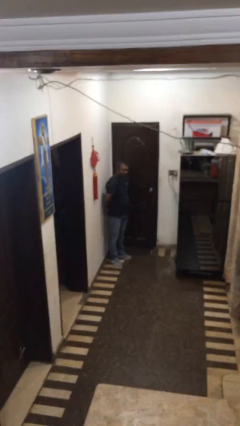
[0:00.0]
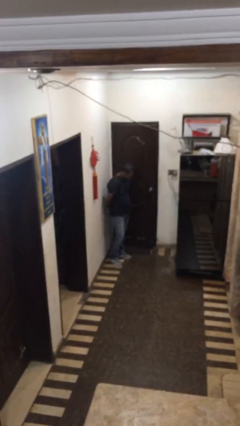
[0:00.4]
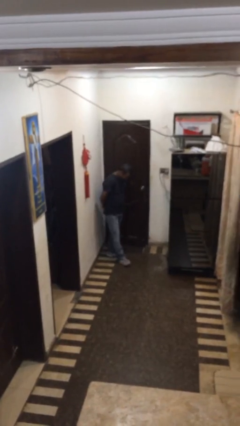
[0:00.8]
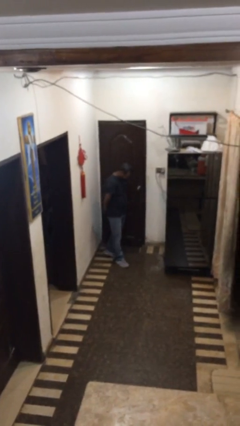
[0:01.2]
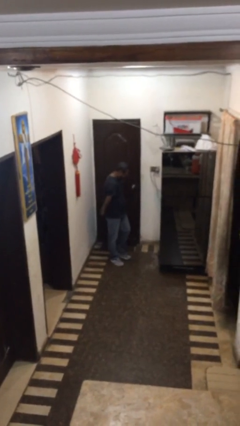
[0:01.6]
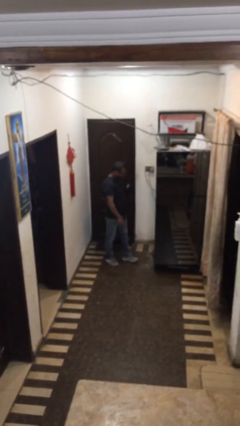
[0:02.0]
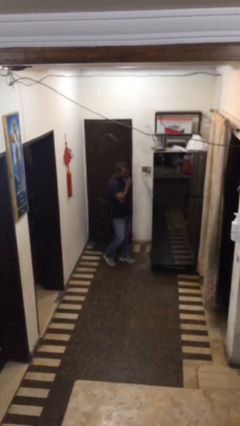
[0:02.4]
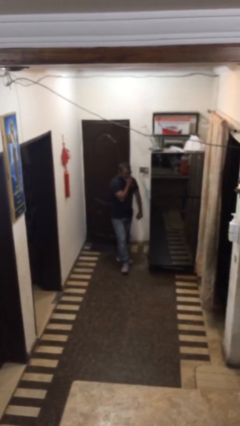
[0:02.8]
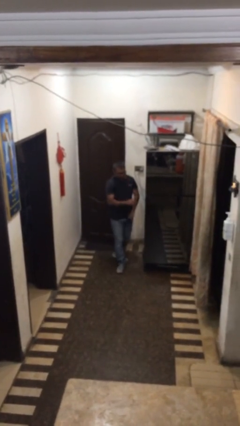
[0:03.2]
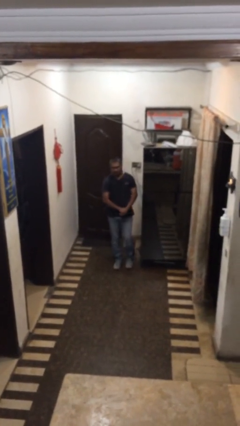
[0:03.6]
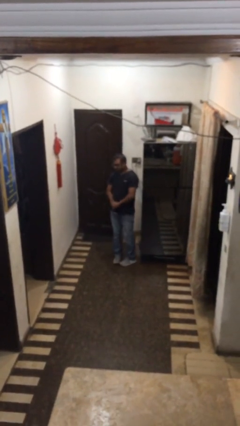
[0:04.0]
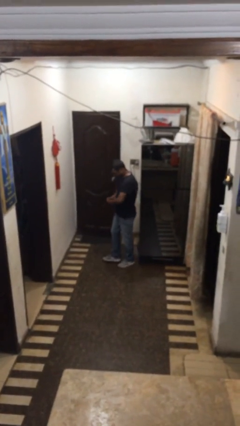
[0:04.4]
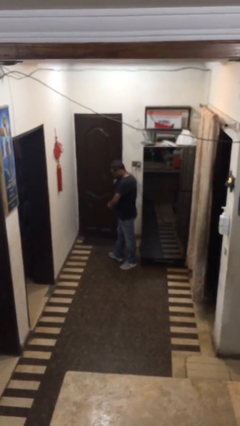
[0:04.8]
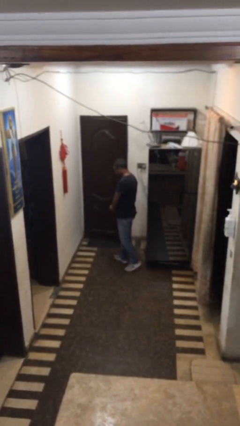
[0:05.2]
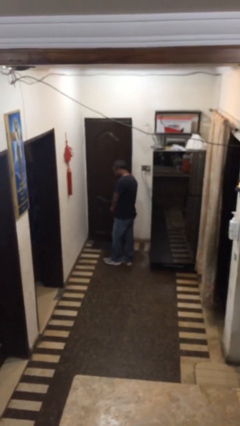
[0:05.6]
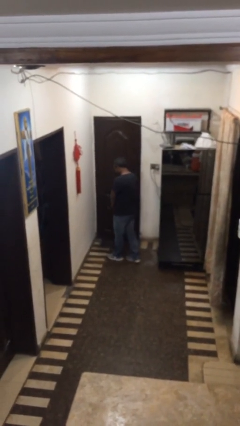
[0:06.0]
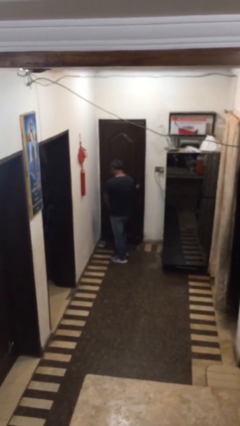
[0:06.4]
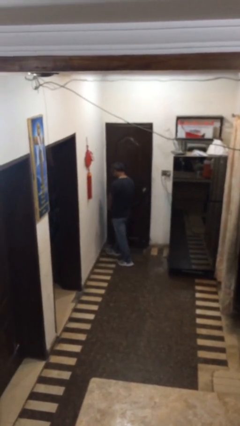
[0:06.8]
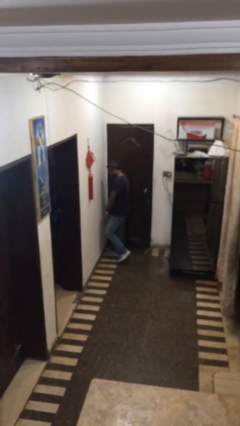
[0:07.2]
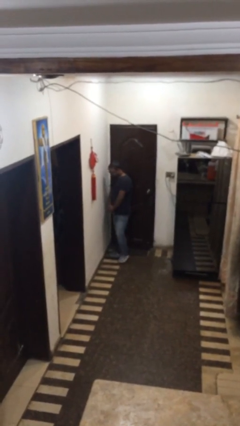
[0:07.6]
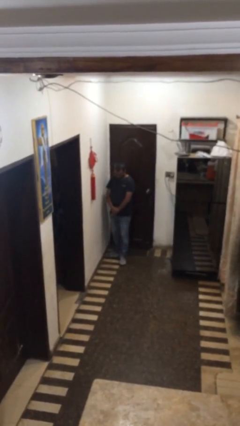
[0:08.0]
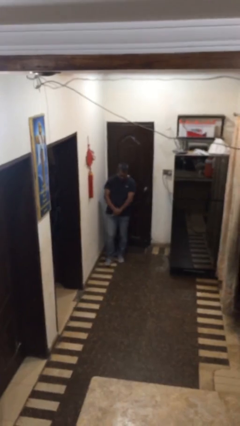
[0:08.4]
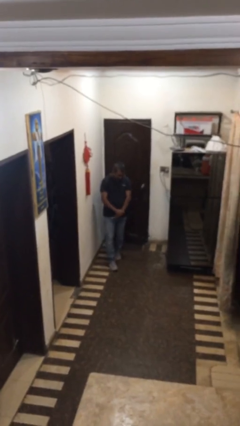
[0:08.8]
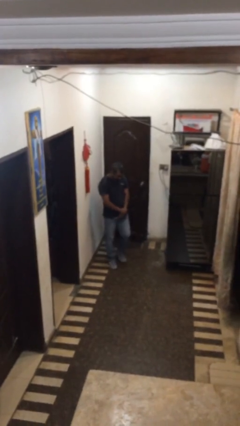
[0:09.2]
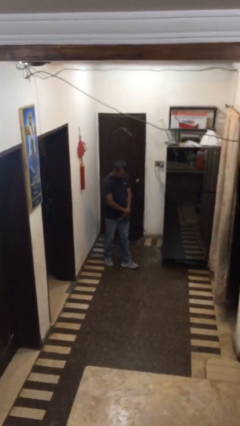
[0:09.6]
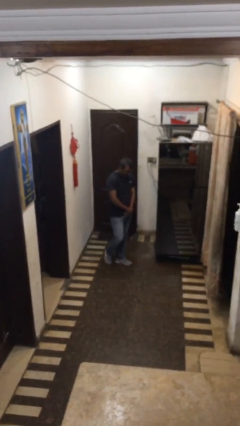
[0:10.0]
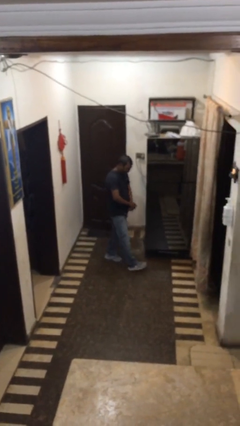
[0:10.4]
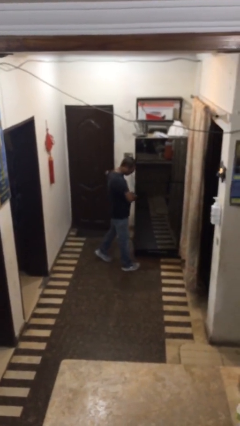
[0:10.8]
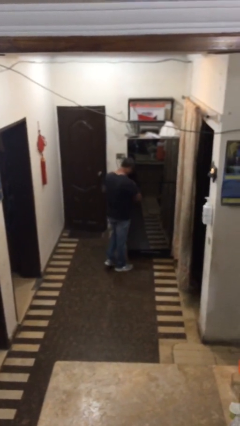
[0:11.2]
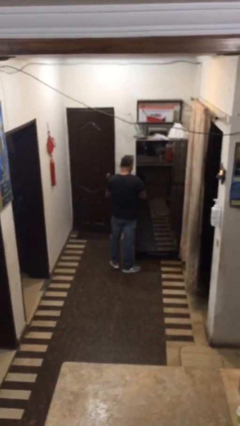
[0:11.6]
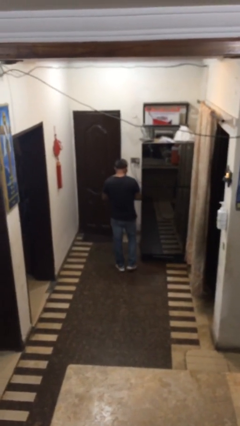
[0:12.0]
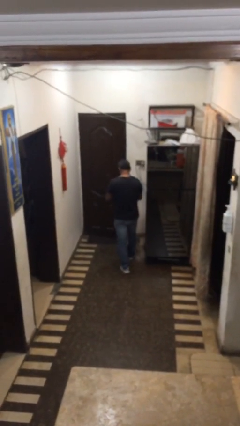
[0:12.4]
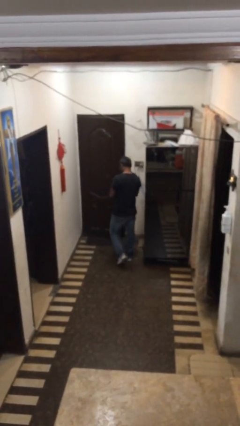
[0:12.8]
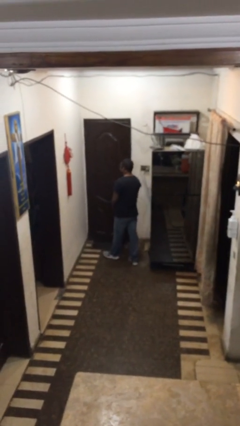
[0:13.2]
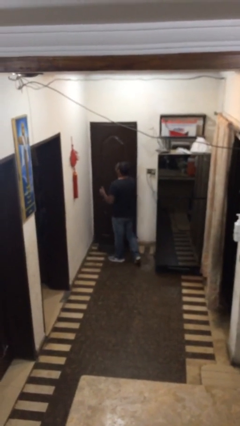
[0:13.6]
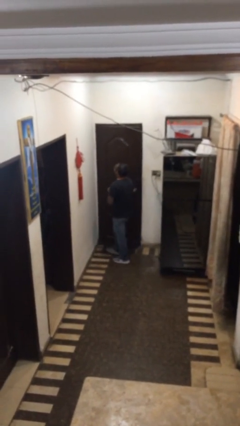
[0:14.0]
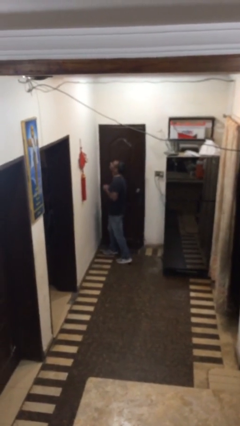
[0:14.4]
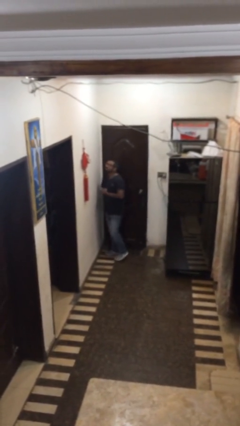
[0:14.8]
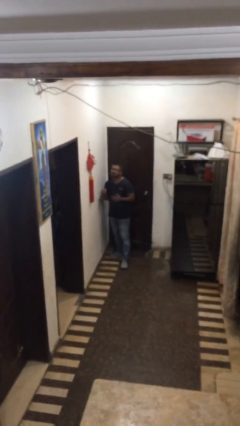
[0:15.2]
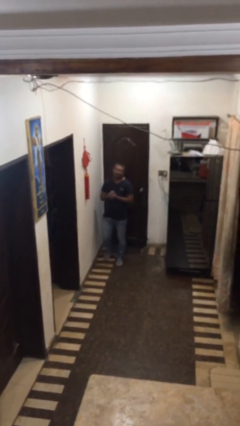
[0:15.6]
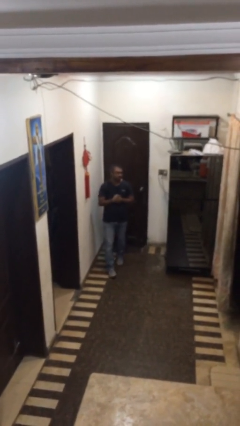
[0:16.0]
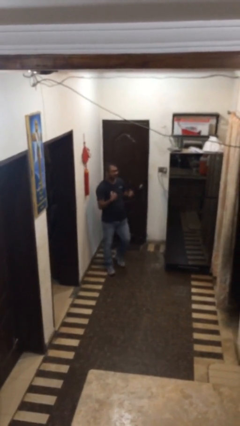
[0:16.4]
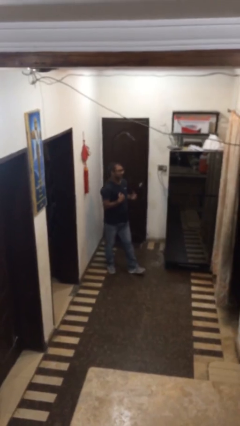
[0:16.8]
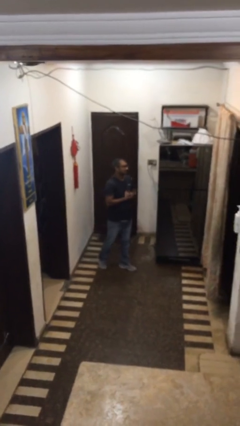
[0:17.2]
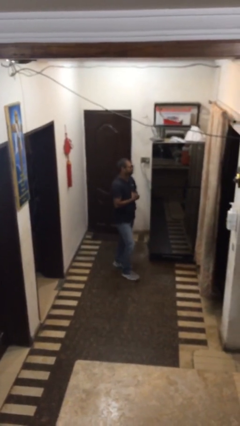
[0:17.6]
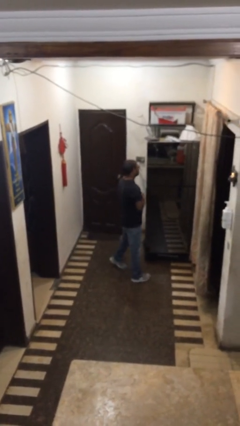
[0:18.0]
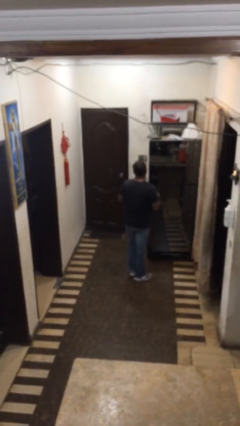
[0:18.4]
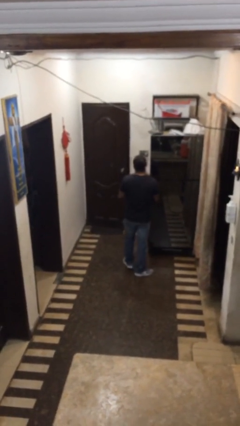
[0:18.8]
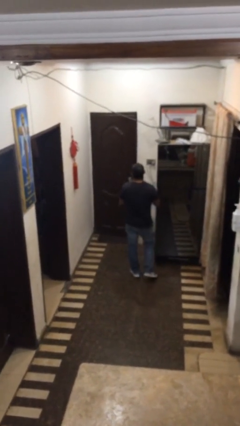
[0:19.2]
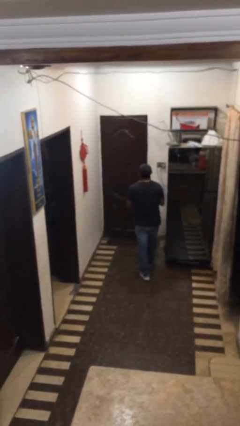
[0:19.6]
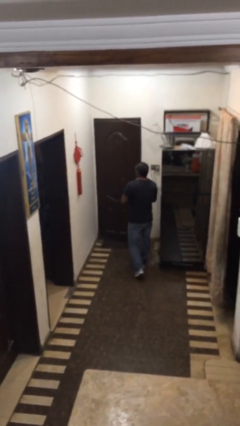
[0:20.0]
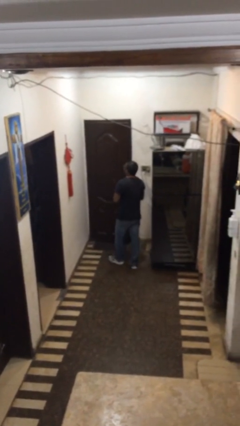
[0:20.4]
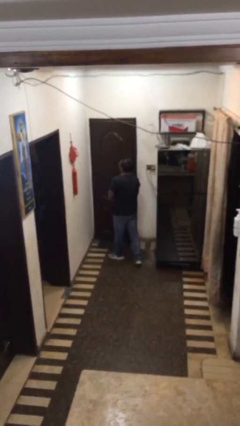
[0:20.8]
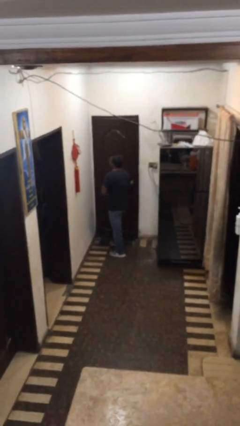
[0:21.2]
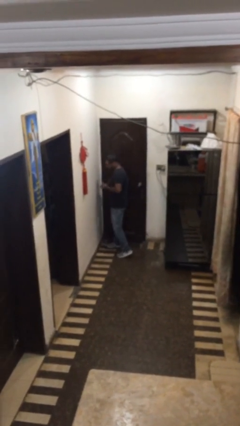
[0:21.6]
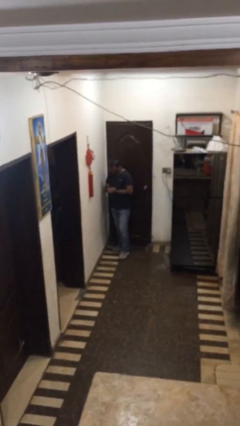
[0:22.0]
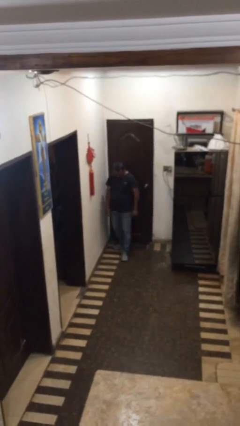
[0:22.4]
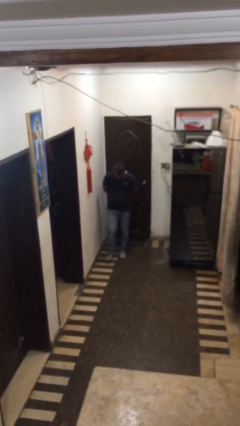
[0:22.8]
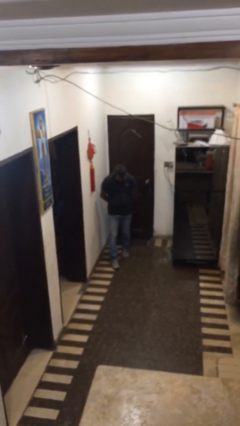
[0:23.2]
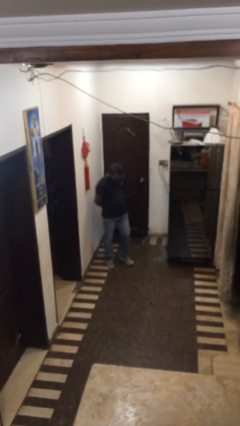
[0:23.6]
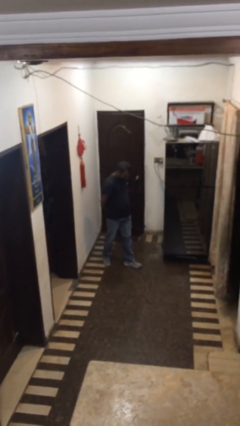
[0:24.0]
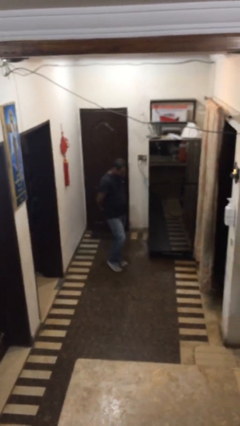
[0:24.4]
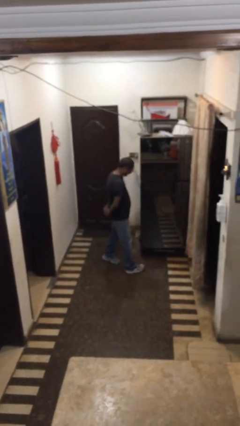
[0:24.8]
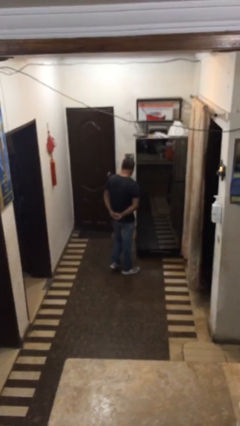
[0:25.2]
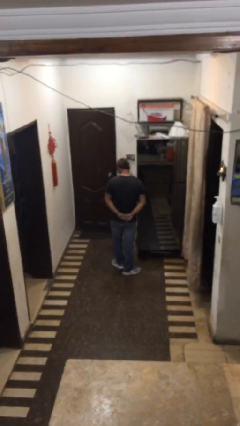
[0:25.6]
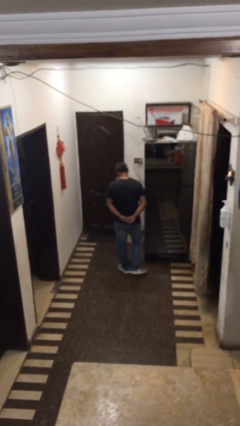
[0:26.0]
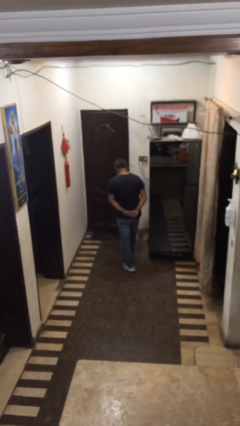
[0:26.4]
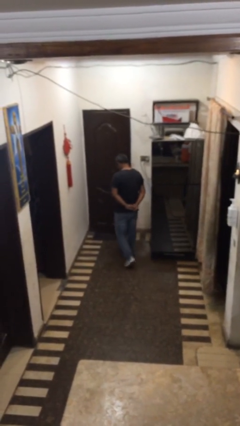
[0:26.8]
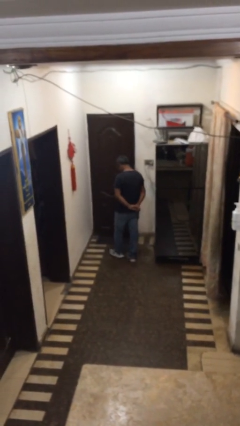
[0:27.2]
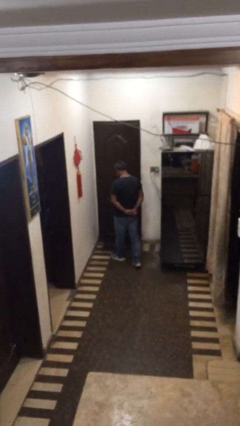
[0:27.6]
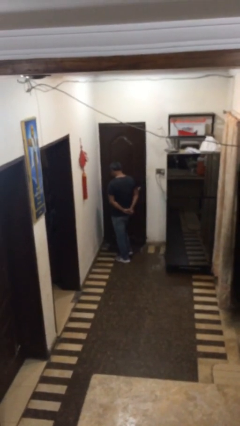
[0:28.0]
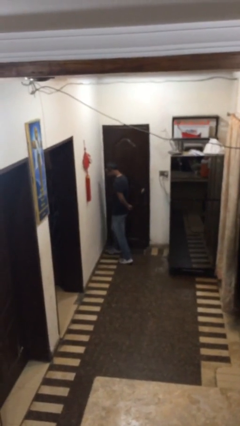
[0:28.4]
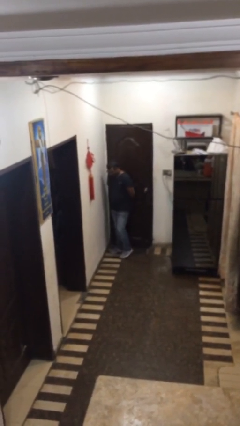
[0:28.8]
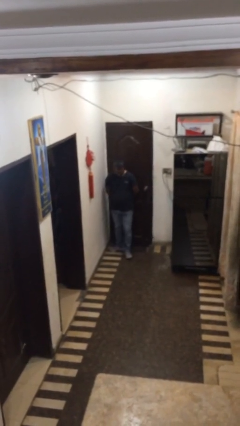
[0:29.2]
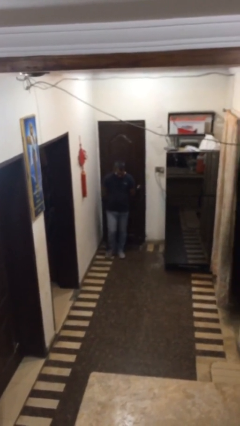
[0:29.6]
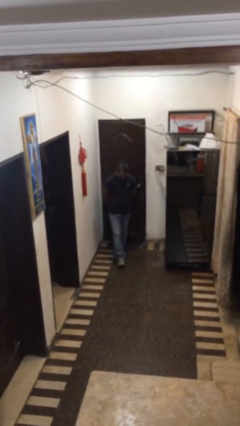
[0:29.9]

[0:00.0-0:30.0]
person walks

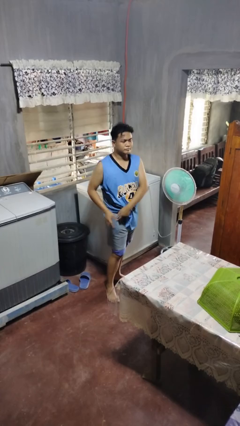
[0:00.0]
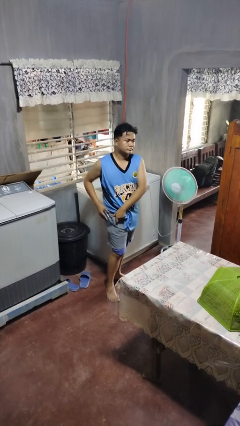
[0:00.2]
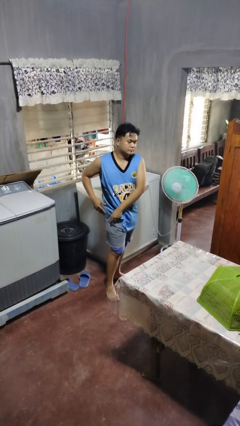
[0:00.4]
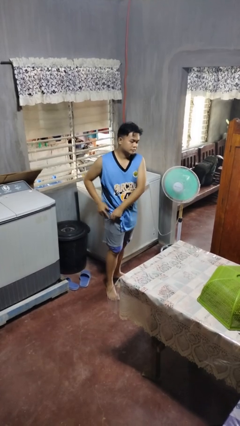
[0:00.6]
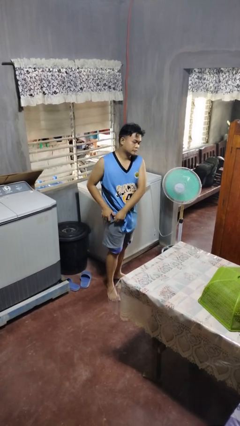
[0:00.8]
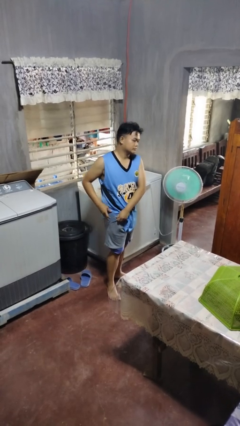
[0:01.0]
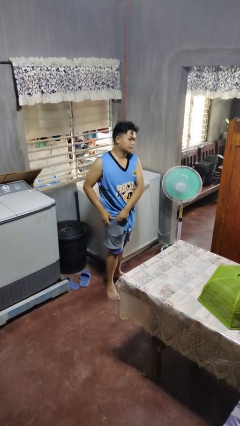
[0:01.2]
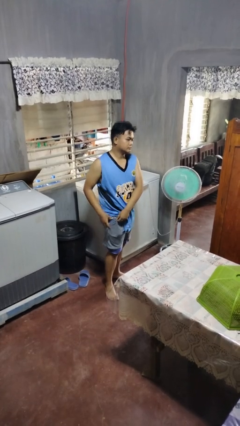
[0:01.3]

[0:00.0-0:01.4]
person puts phone into pocket

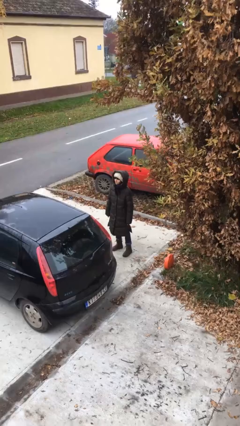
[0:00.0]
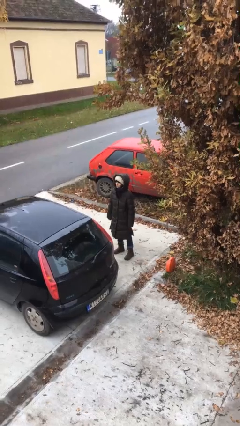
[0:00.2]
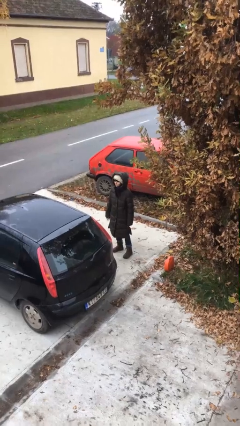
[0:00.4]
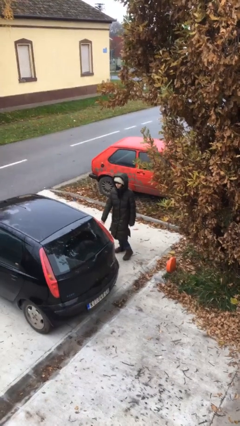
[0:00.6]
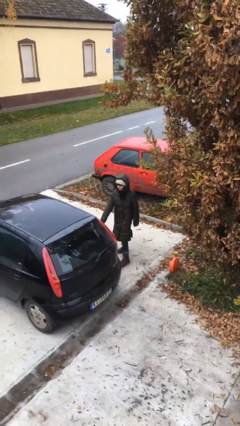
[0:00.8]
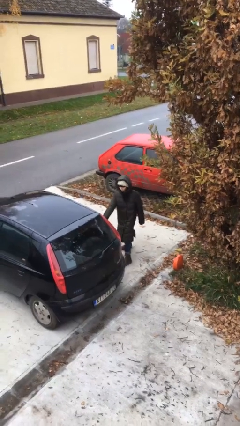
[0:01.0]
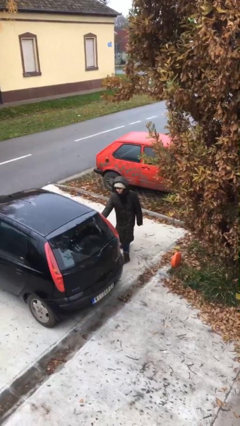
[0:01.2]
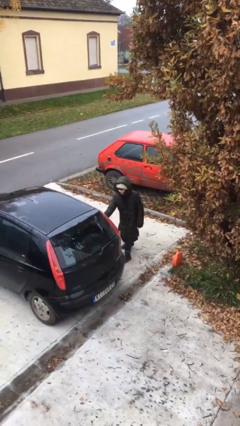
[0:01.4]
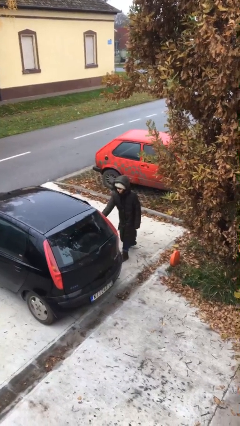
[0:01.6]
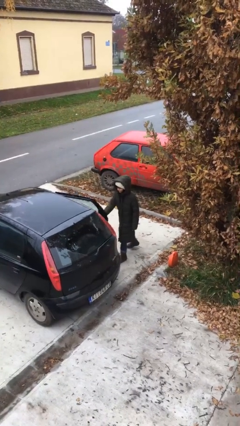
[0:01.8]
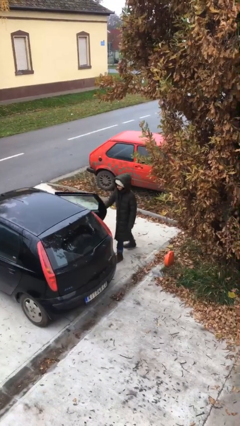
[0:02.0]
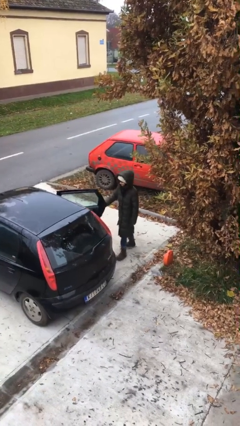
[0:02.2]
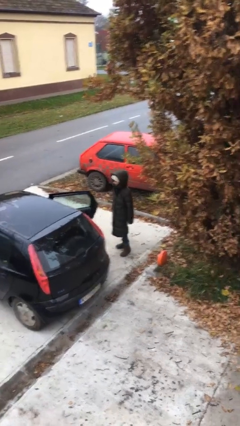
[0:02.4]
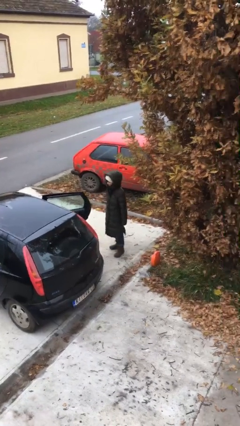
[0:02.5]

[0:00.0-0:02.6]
person opens car door
